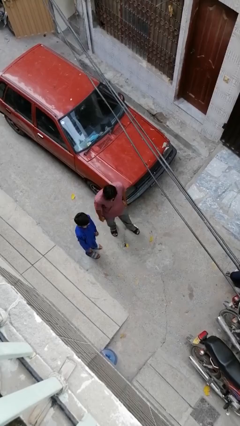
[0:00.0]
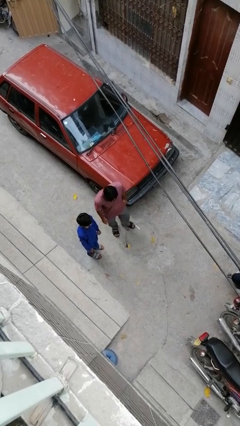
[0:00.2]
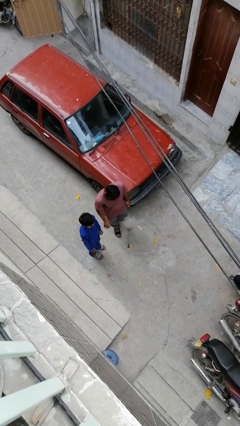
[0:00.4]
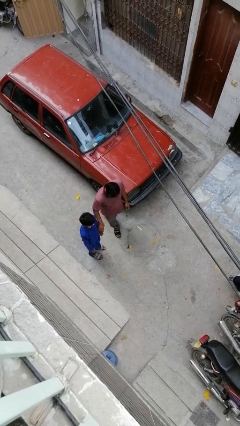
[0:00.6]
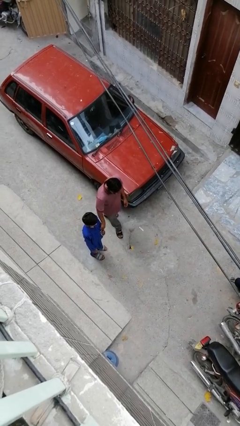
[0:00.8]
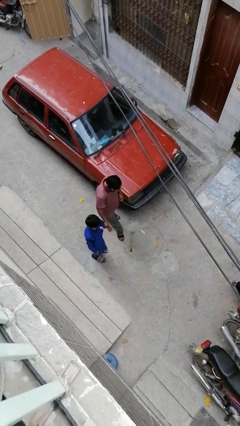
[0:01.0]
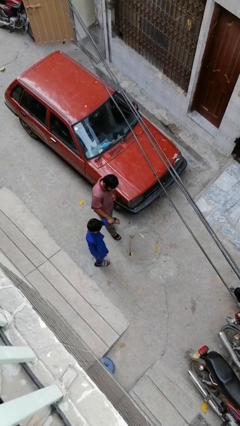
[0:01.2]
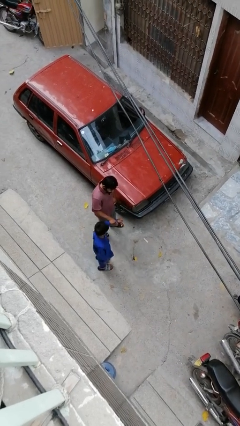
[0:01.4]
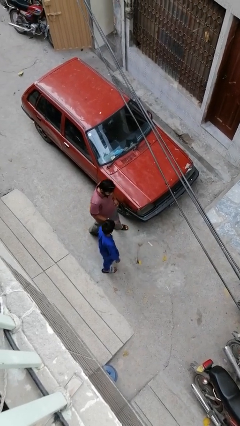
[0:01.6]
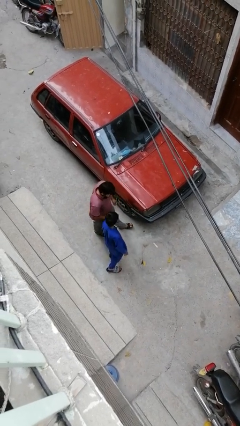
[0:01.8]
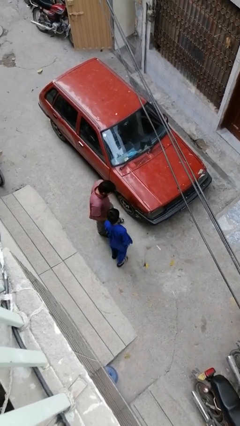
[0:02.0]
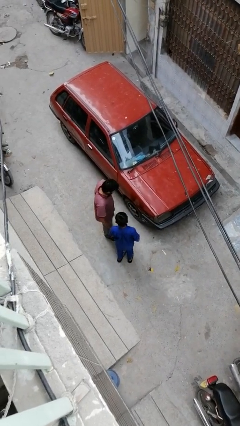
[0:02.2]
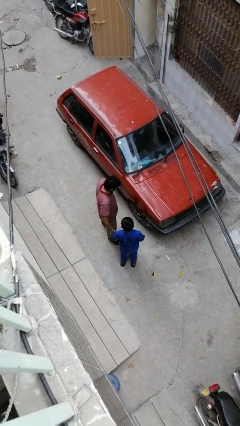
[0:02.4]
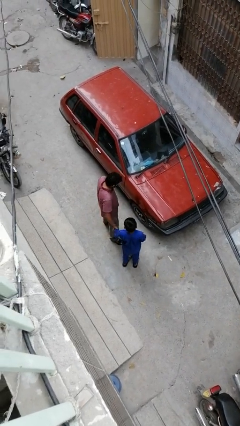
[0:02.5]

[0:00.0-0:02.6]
person grabs person by forearm

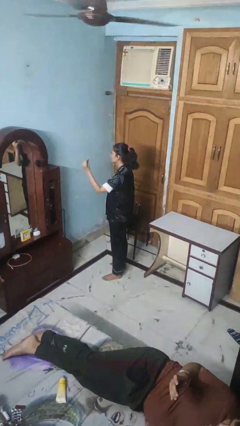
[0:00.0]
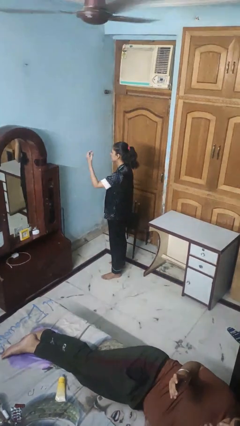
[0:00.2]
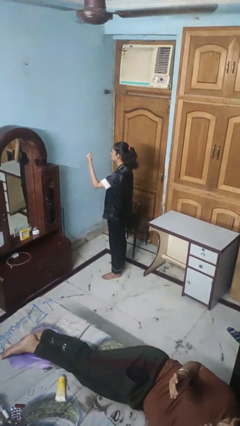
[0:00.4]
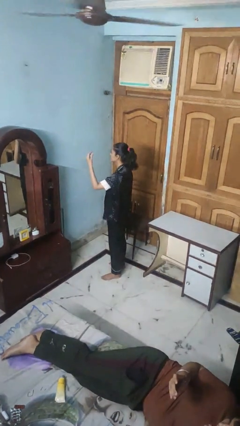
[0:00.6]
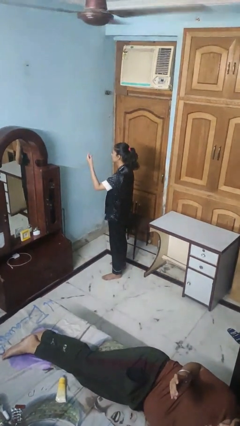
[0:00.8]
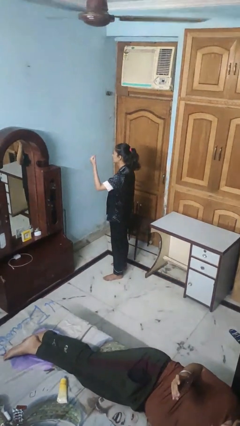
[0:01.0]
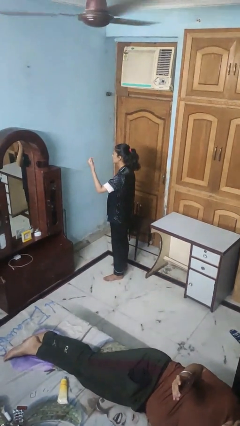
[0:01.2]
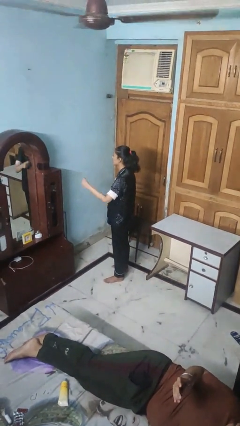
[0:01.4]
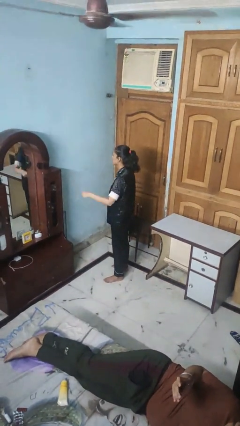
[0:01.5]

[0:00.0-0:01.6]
person snaps fingers

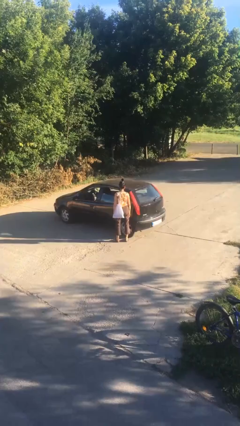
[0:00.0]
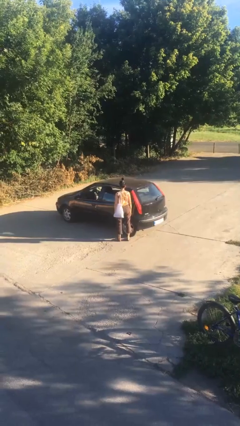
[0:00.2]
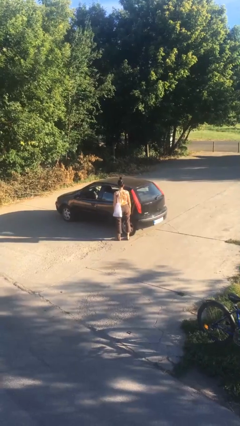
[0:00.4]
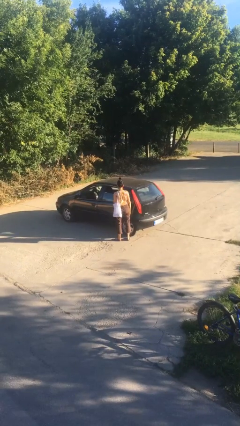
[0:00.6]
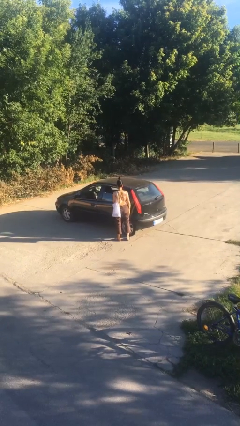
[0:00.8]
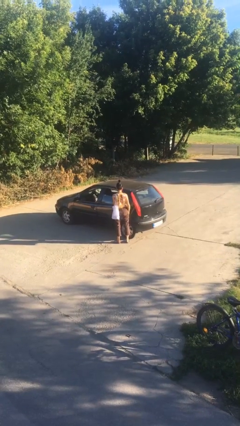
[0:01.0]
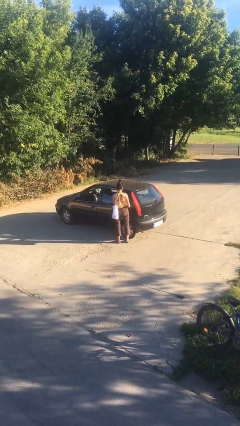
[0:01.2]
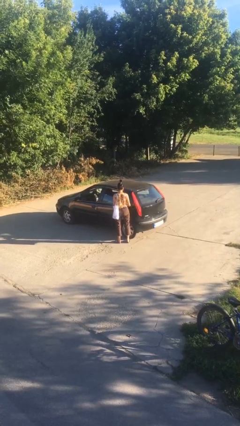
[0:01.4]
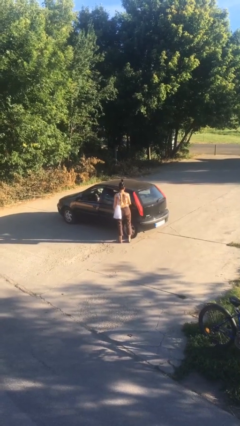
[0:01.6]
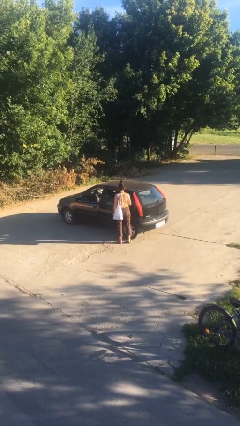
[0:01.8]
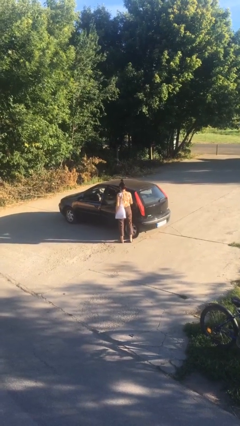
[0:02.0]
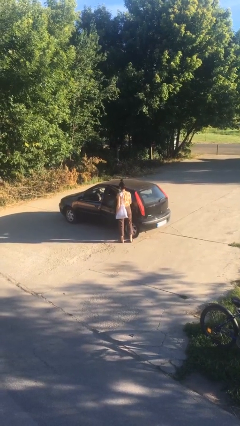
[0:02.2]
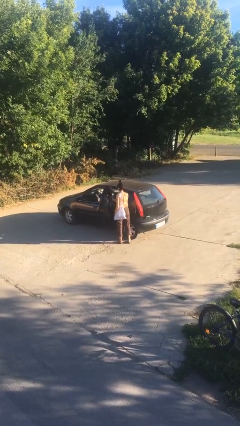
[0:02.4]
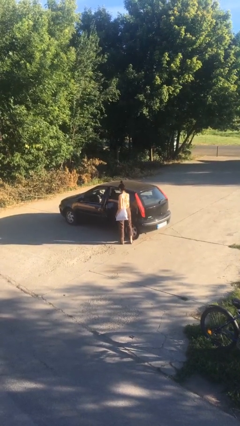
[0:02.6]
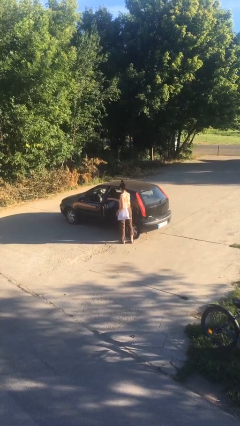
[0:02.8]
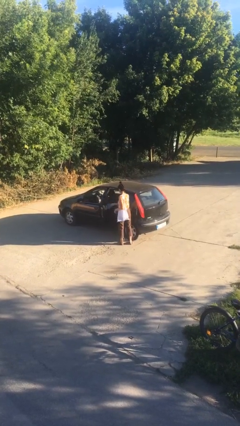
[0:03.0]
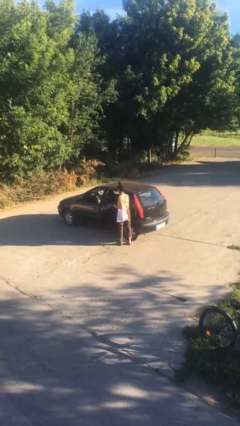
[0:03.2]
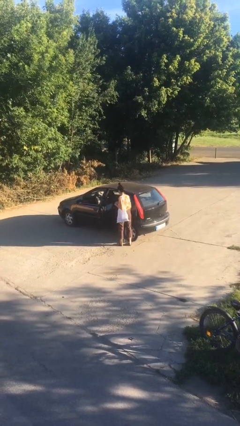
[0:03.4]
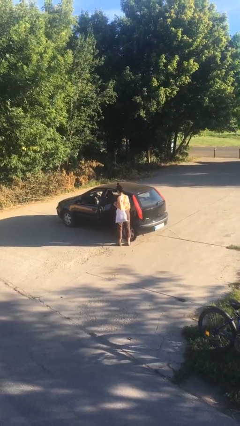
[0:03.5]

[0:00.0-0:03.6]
person opens car door

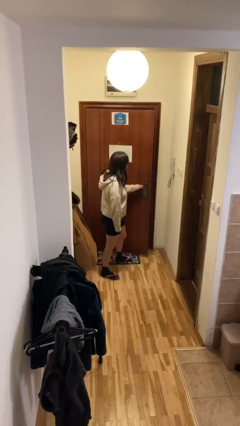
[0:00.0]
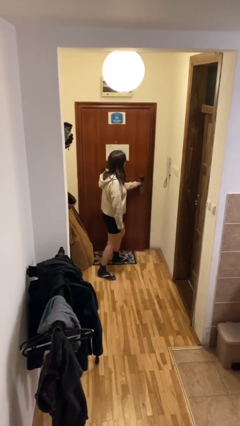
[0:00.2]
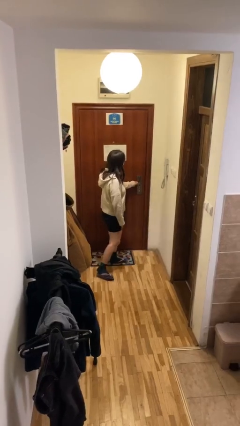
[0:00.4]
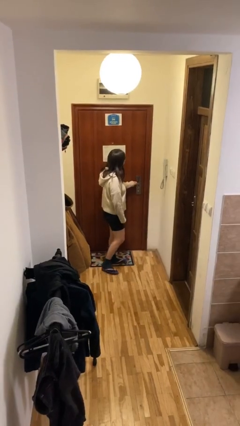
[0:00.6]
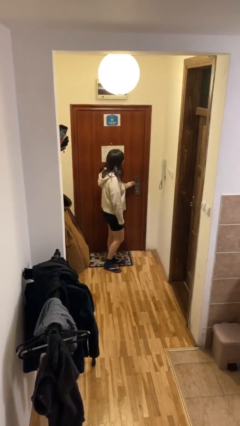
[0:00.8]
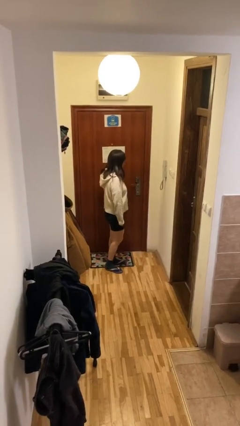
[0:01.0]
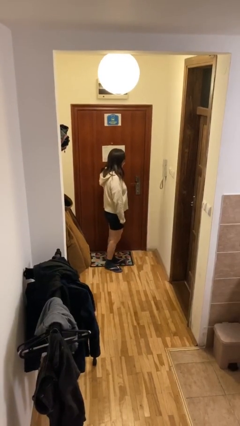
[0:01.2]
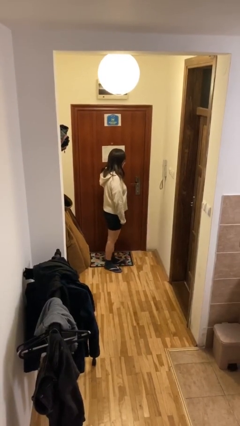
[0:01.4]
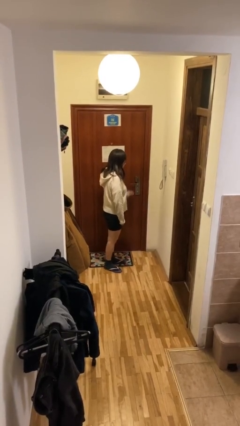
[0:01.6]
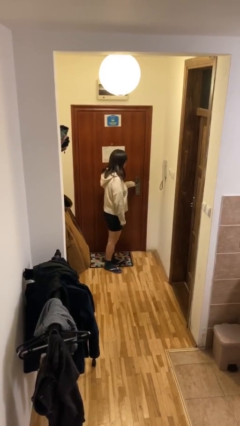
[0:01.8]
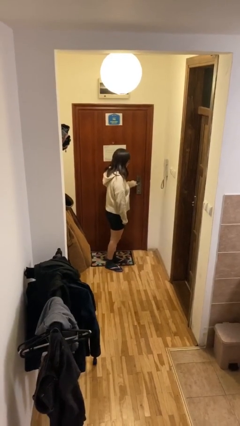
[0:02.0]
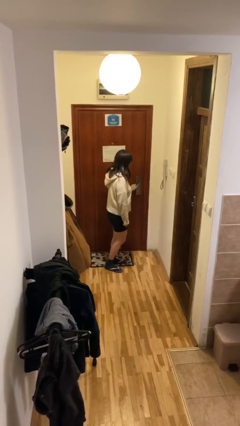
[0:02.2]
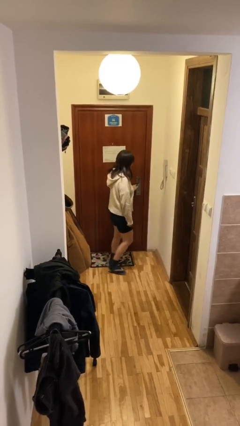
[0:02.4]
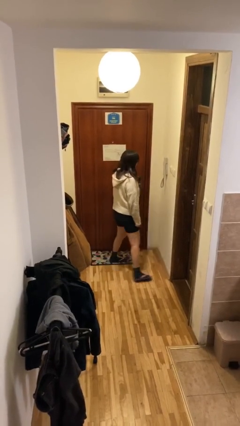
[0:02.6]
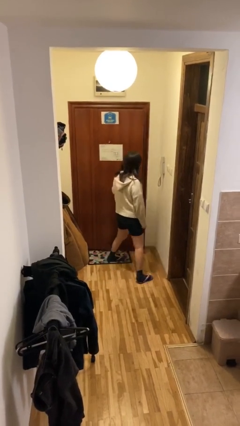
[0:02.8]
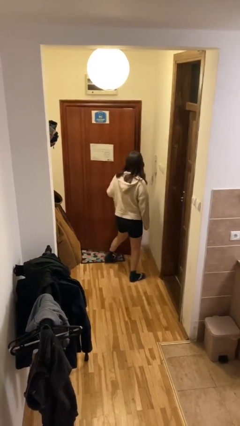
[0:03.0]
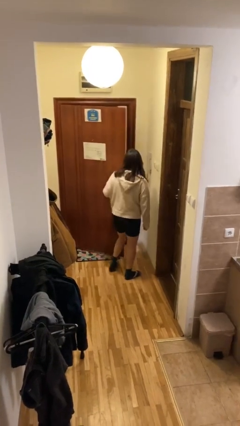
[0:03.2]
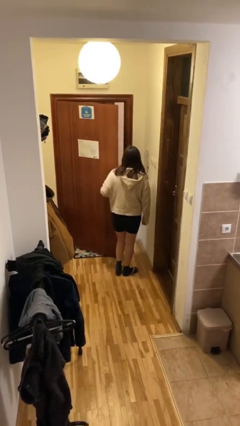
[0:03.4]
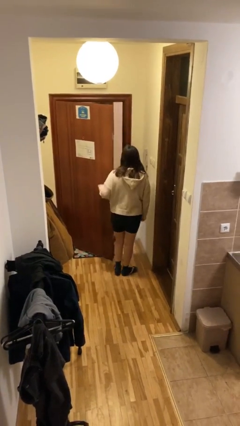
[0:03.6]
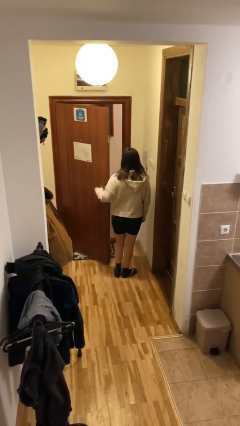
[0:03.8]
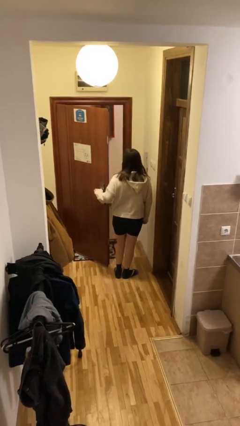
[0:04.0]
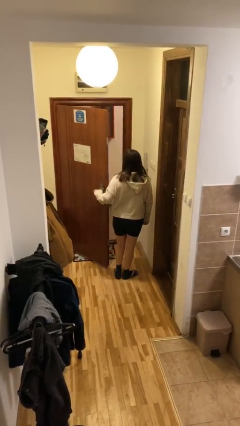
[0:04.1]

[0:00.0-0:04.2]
person opens facility door

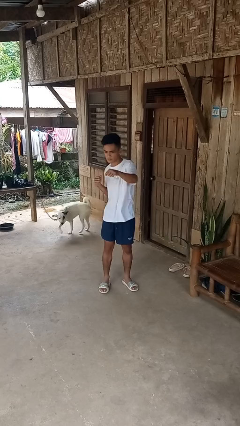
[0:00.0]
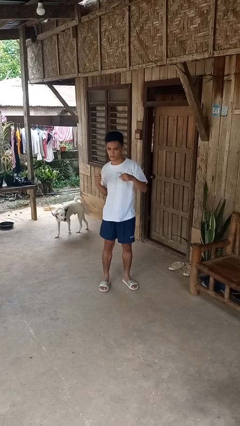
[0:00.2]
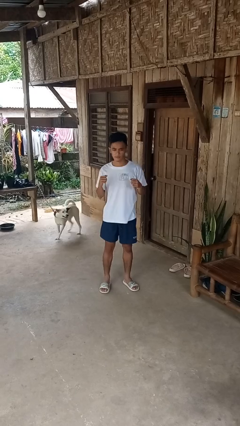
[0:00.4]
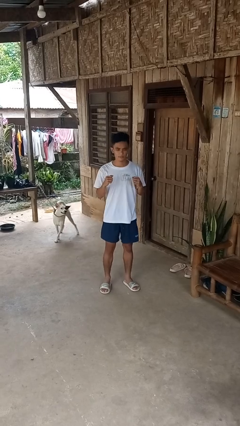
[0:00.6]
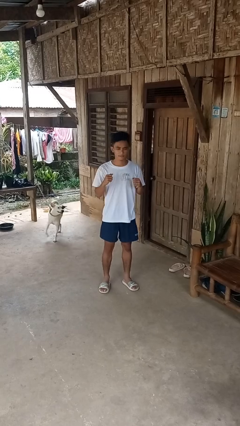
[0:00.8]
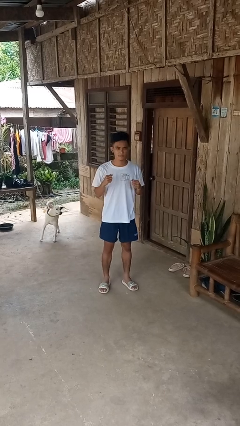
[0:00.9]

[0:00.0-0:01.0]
person punches

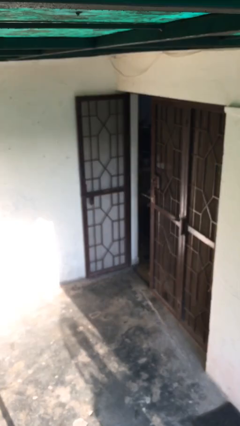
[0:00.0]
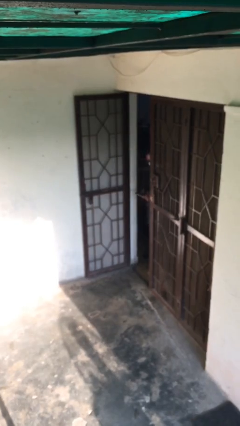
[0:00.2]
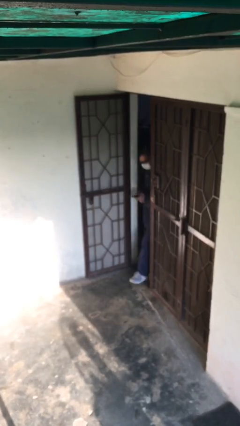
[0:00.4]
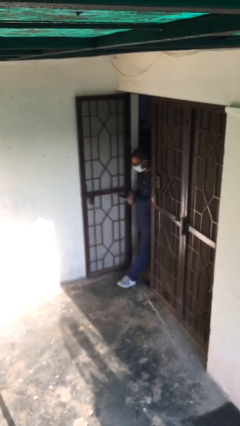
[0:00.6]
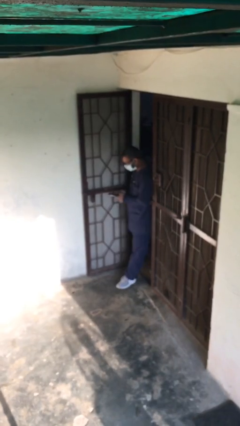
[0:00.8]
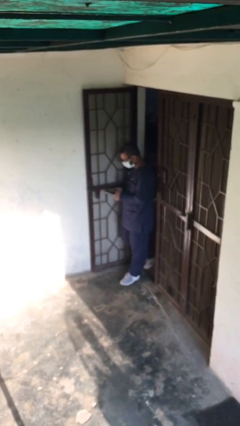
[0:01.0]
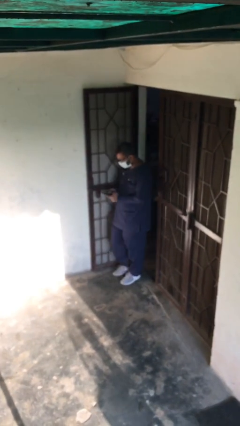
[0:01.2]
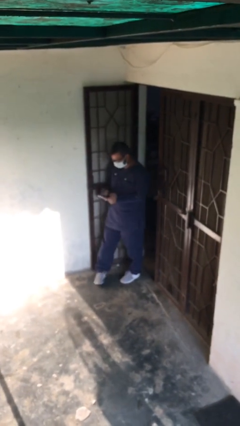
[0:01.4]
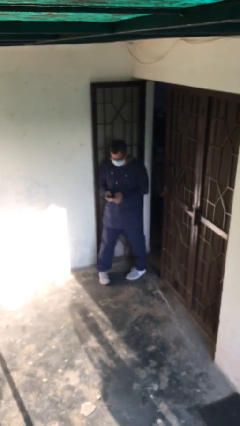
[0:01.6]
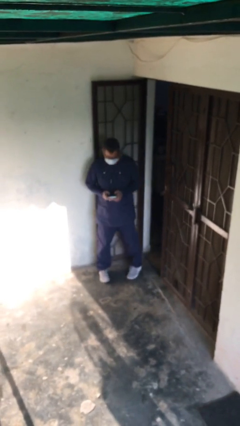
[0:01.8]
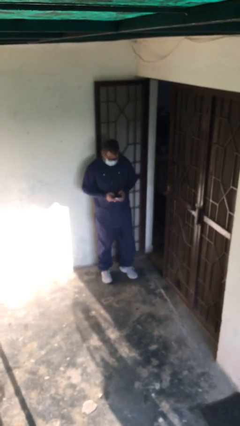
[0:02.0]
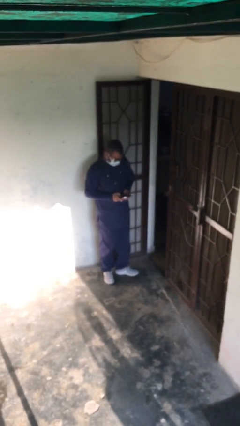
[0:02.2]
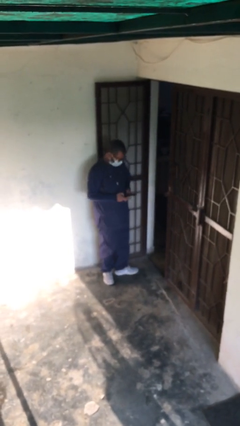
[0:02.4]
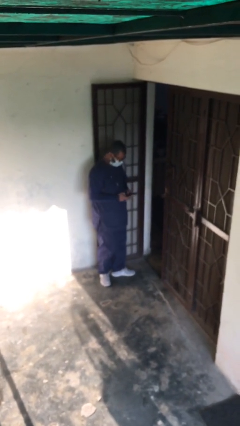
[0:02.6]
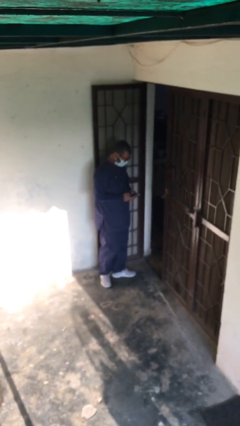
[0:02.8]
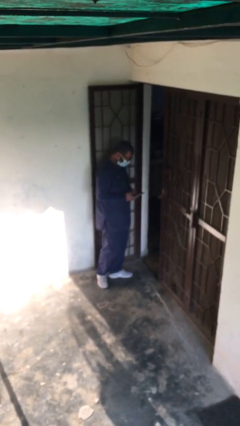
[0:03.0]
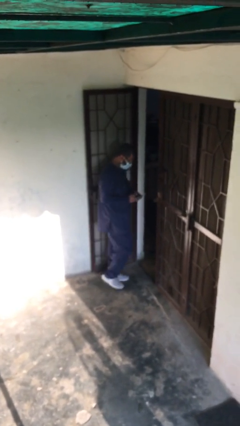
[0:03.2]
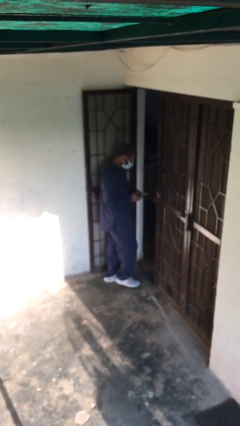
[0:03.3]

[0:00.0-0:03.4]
person enters scene through structure

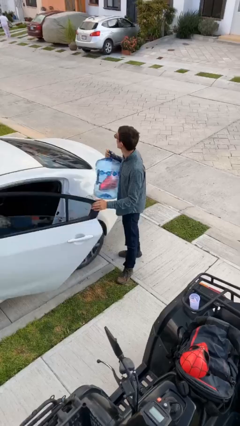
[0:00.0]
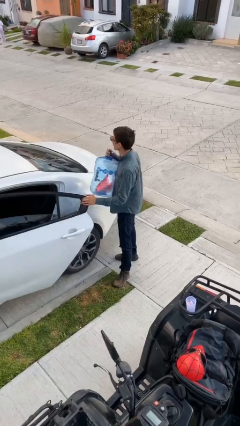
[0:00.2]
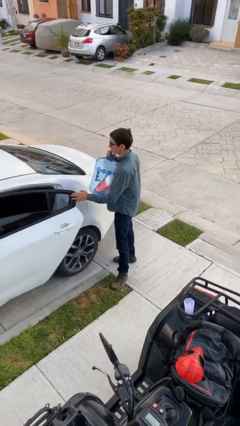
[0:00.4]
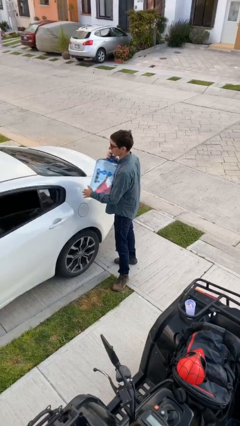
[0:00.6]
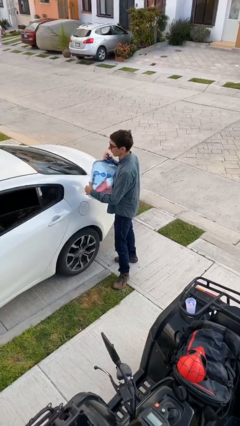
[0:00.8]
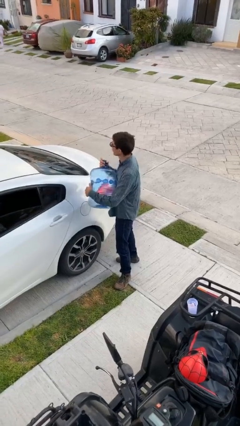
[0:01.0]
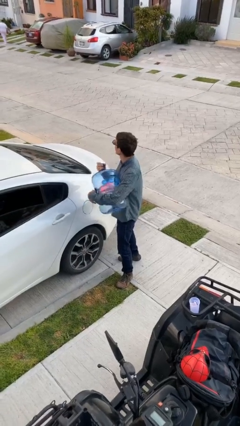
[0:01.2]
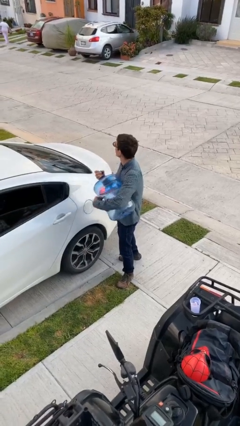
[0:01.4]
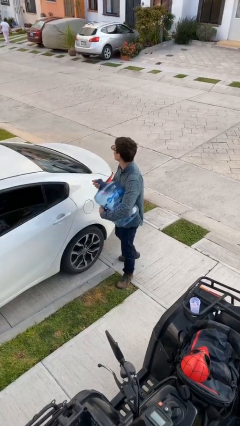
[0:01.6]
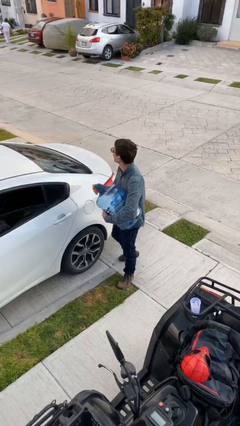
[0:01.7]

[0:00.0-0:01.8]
person closes car door
